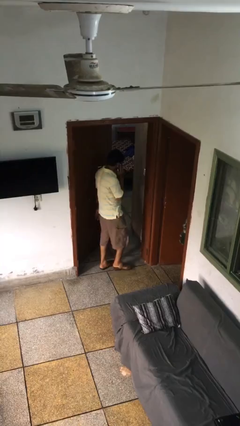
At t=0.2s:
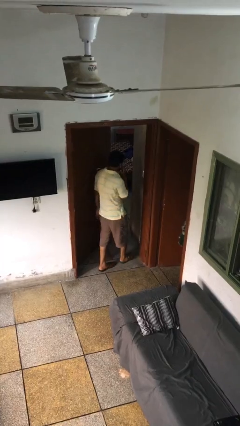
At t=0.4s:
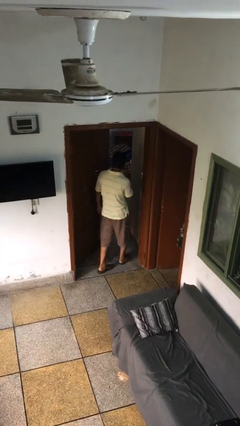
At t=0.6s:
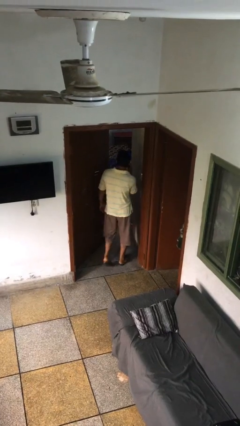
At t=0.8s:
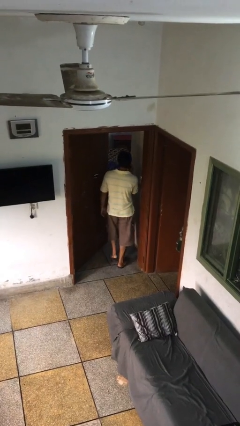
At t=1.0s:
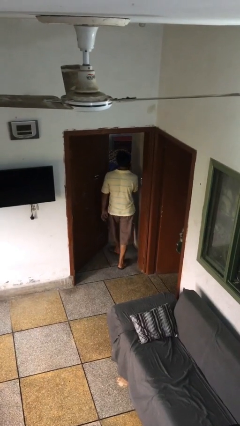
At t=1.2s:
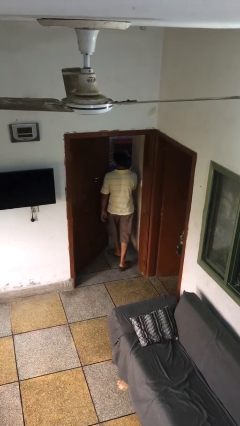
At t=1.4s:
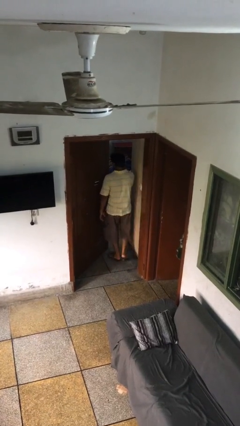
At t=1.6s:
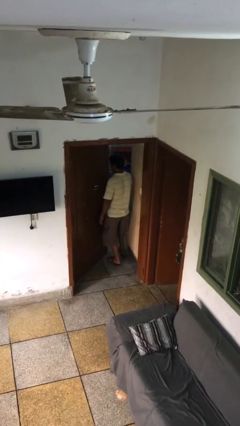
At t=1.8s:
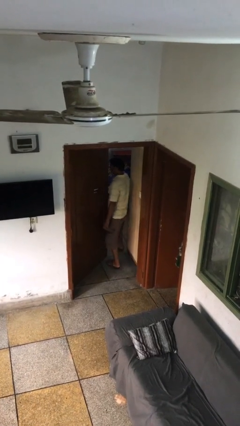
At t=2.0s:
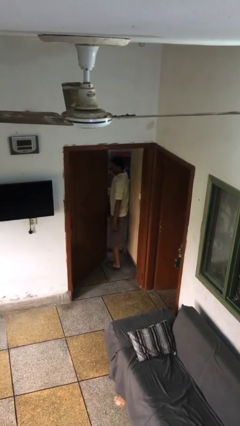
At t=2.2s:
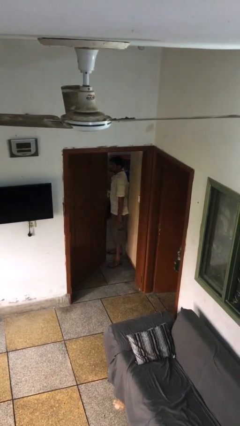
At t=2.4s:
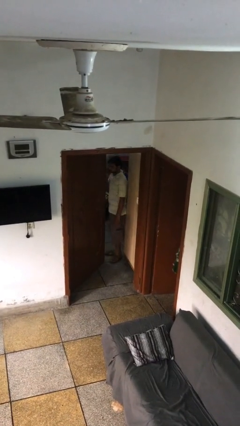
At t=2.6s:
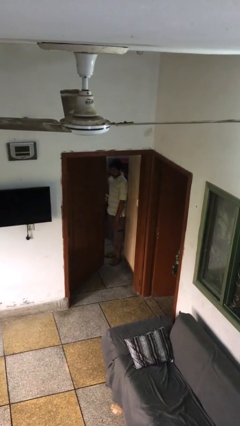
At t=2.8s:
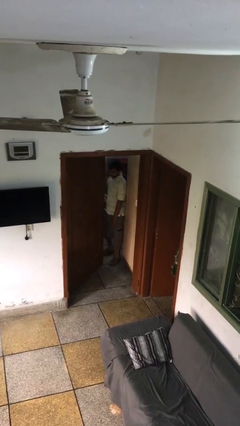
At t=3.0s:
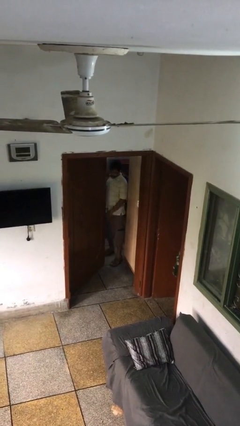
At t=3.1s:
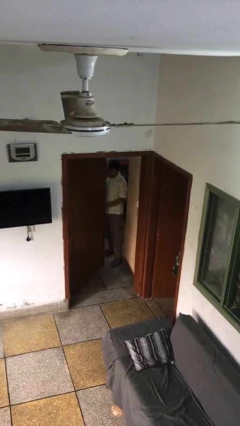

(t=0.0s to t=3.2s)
person exits scene through structure

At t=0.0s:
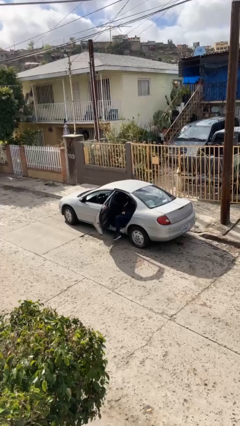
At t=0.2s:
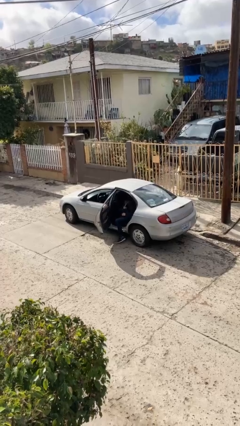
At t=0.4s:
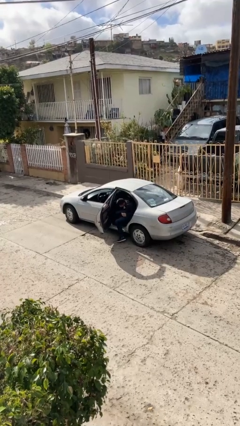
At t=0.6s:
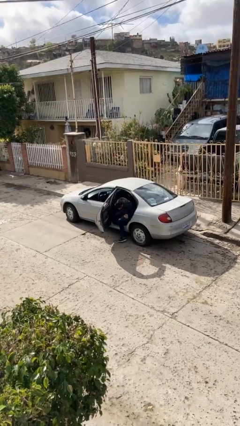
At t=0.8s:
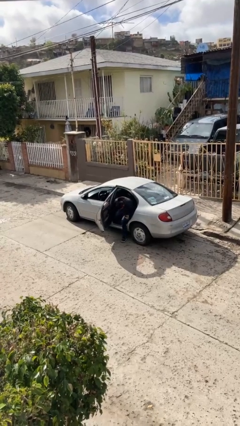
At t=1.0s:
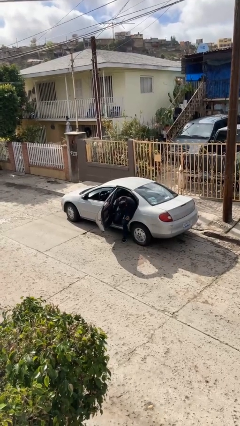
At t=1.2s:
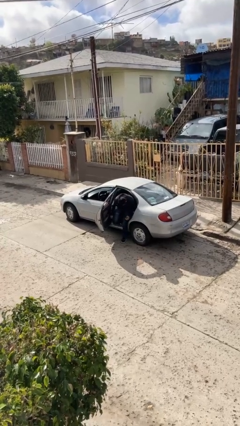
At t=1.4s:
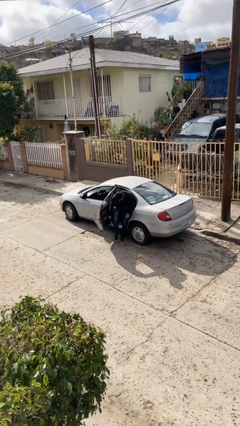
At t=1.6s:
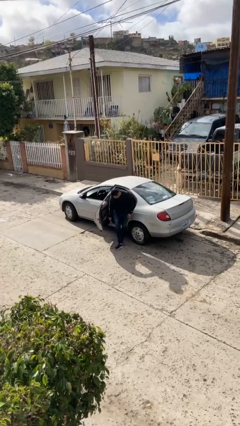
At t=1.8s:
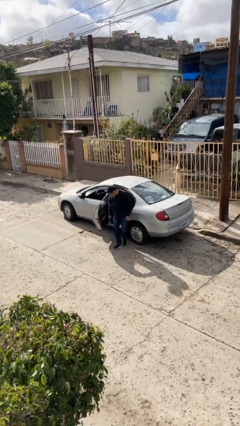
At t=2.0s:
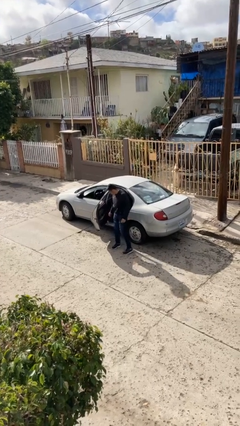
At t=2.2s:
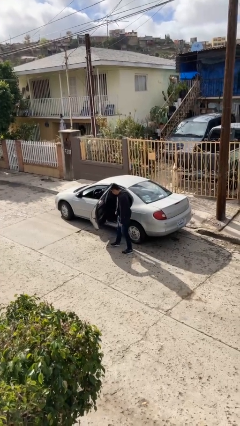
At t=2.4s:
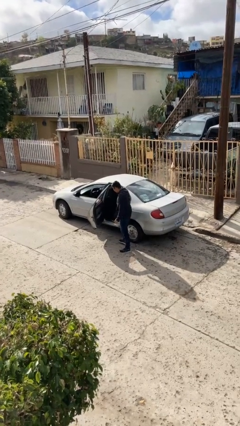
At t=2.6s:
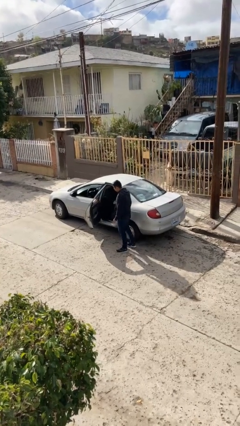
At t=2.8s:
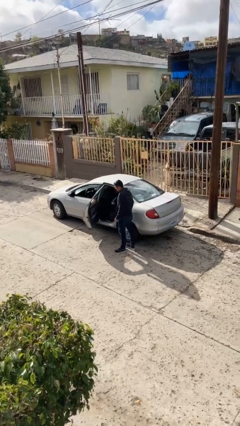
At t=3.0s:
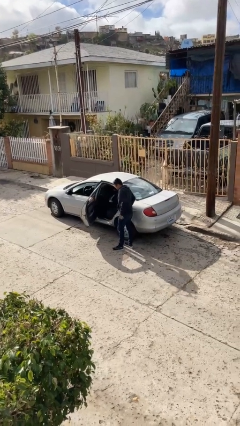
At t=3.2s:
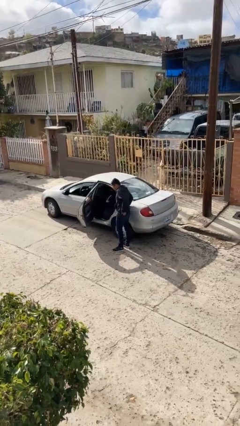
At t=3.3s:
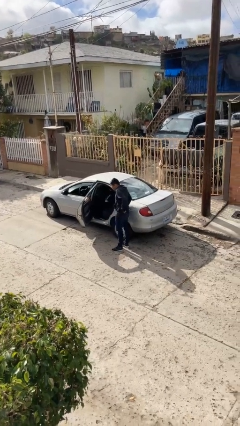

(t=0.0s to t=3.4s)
person exits car

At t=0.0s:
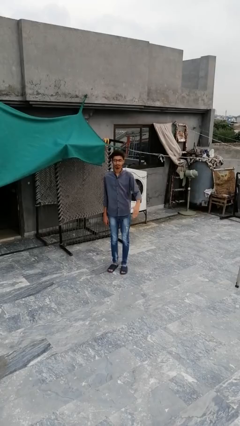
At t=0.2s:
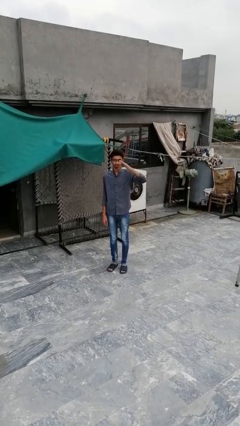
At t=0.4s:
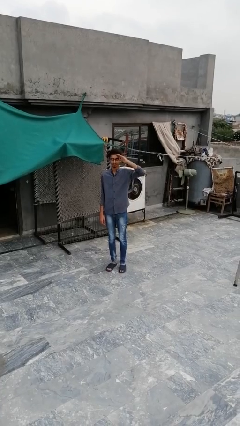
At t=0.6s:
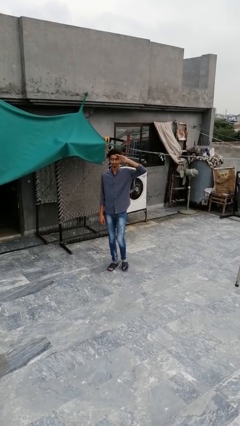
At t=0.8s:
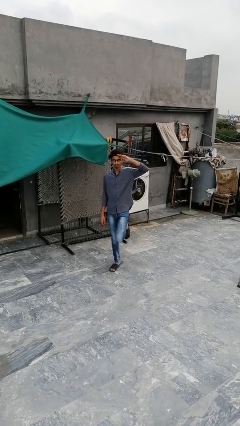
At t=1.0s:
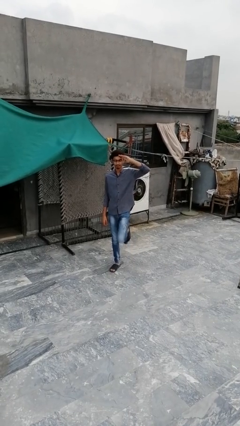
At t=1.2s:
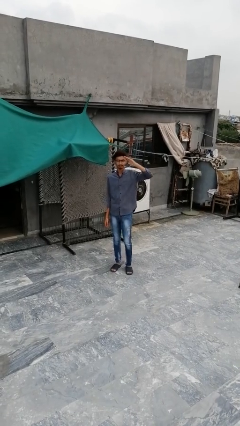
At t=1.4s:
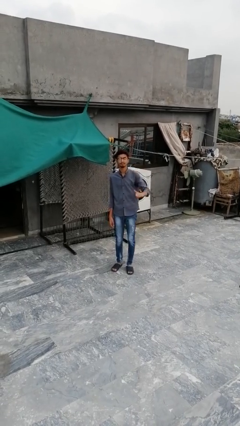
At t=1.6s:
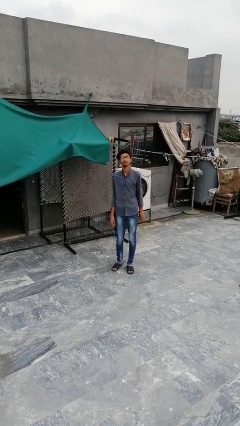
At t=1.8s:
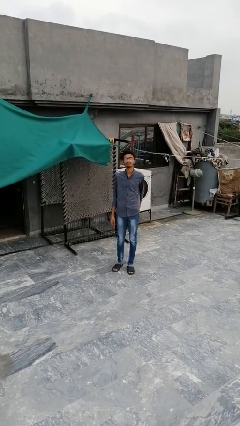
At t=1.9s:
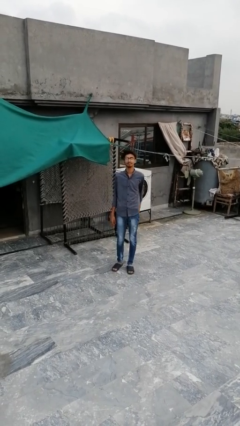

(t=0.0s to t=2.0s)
person salutes

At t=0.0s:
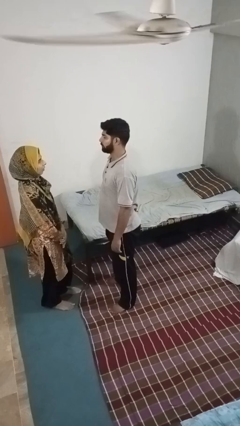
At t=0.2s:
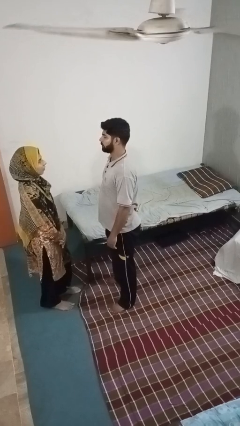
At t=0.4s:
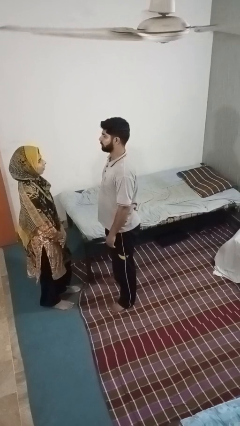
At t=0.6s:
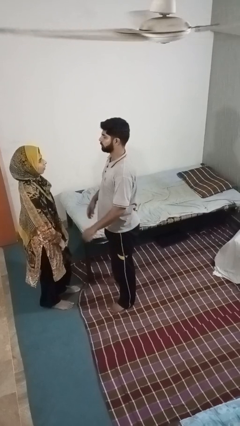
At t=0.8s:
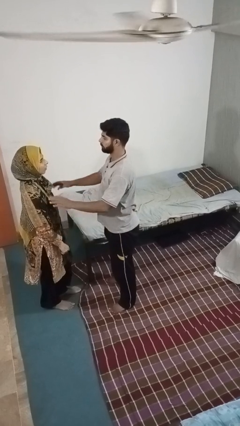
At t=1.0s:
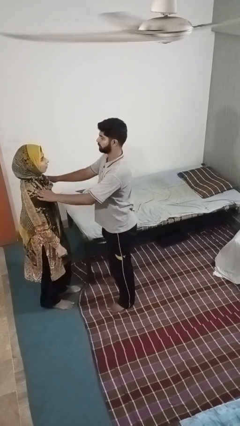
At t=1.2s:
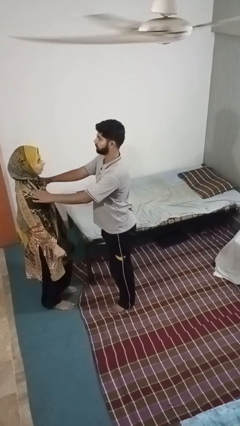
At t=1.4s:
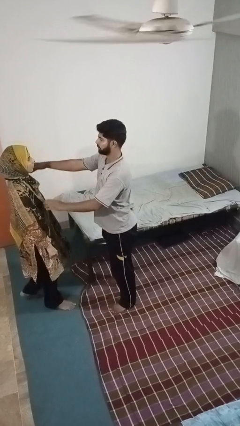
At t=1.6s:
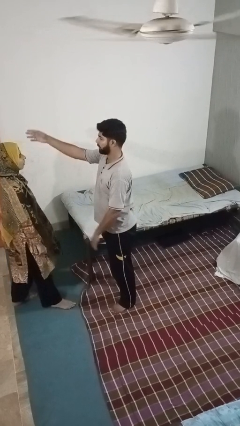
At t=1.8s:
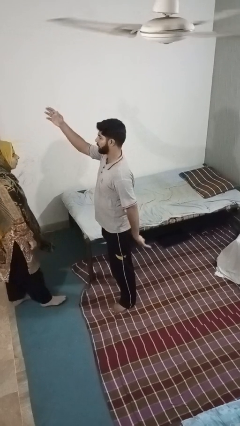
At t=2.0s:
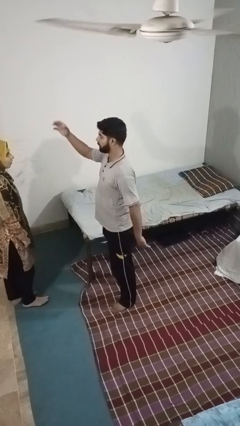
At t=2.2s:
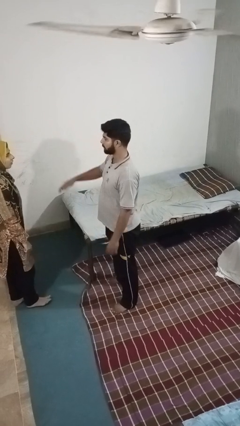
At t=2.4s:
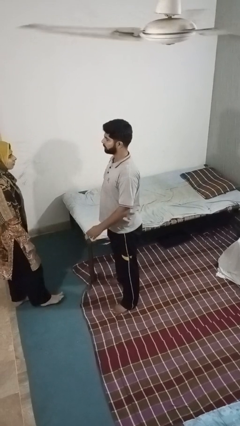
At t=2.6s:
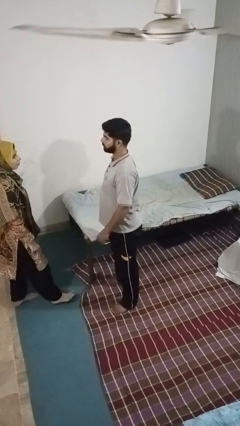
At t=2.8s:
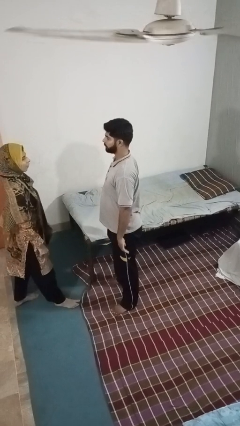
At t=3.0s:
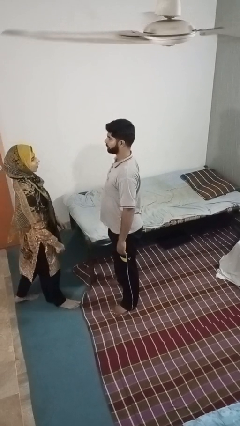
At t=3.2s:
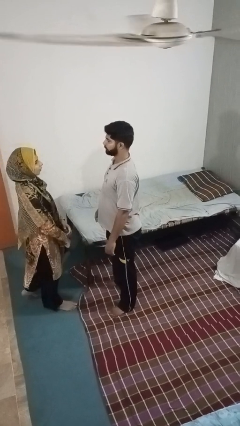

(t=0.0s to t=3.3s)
person shoves person

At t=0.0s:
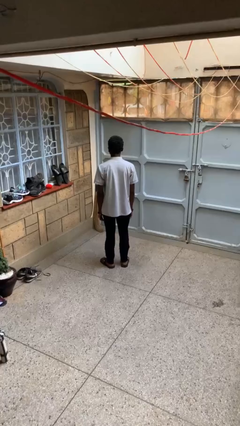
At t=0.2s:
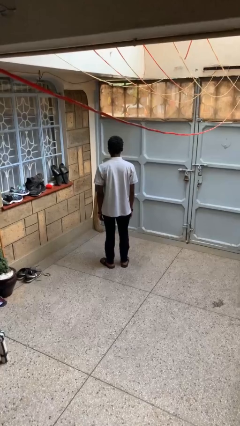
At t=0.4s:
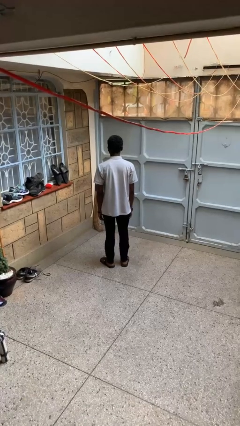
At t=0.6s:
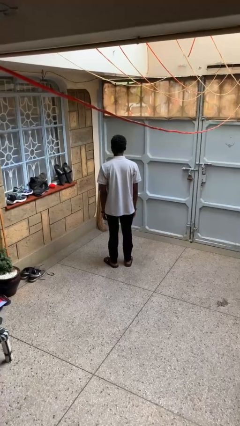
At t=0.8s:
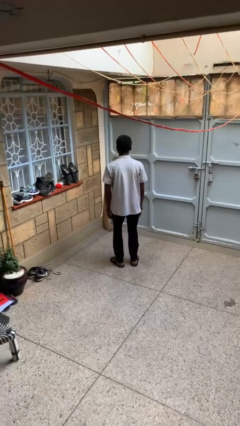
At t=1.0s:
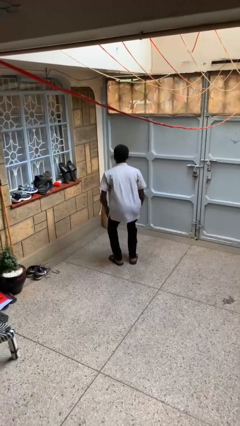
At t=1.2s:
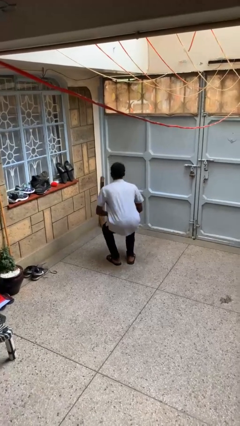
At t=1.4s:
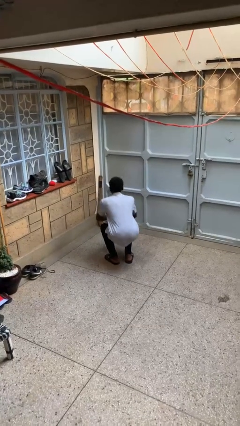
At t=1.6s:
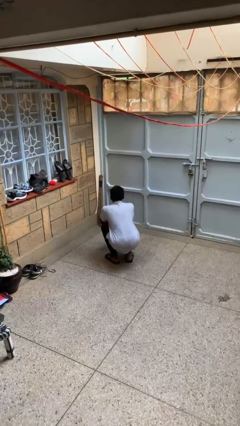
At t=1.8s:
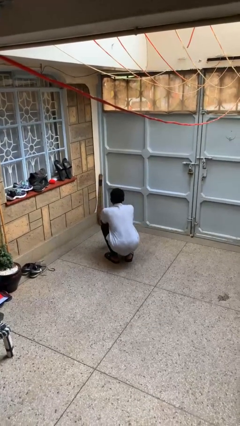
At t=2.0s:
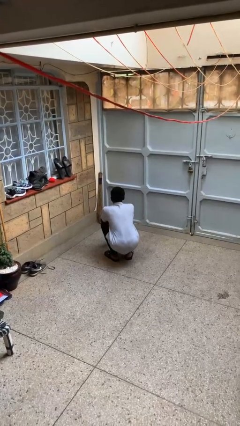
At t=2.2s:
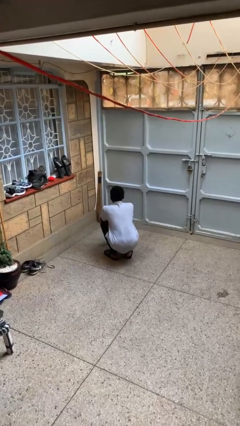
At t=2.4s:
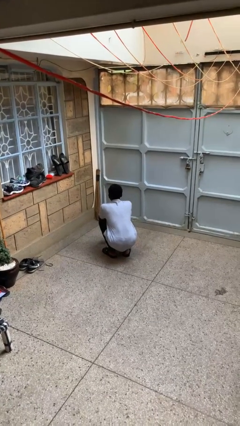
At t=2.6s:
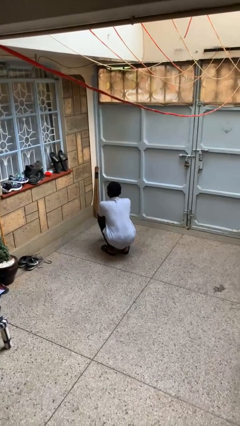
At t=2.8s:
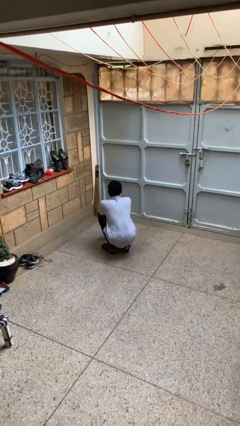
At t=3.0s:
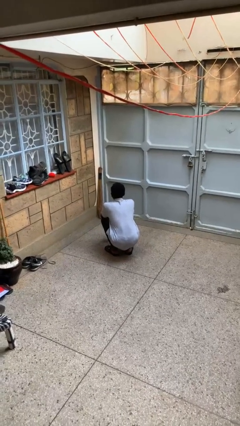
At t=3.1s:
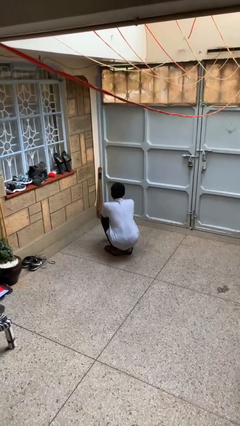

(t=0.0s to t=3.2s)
person squats

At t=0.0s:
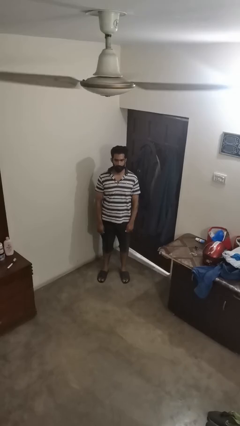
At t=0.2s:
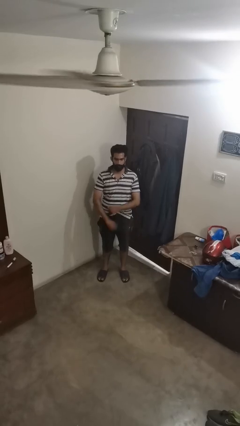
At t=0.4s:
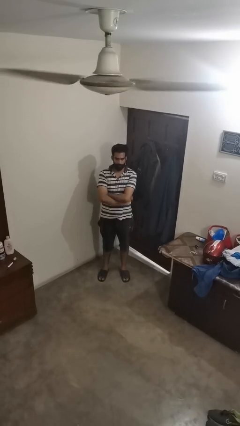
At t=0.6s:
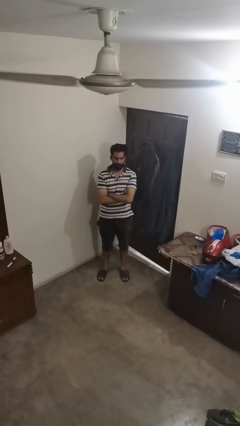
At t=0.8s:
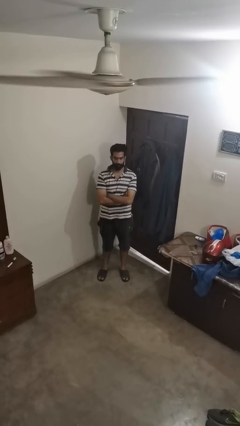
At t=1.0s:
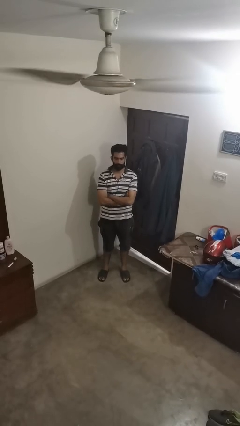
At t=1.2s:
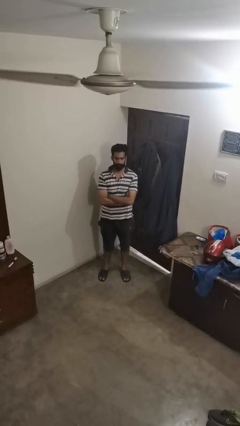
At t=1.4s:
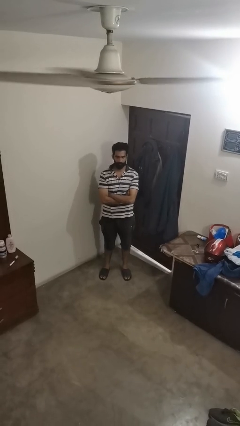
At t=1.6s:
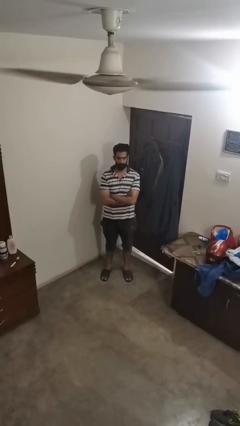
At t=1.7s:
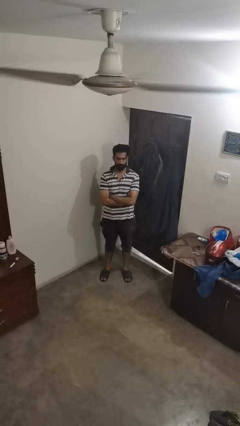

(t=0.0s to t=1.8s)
person crosses arms

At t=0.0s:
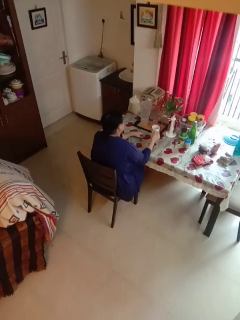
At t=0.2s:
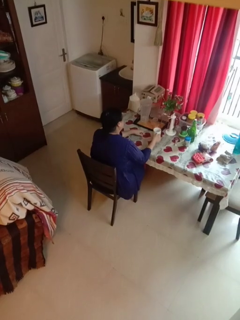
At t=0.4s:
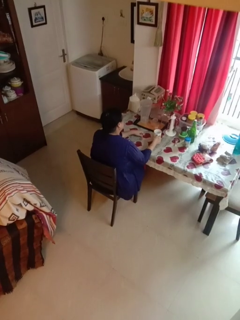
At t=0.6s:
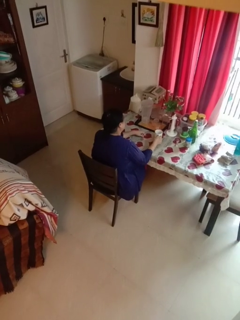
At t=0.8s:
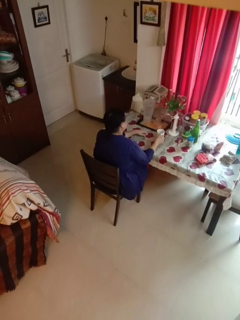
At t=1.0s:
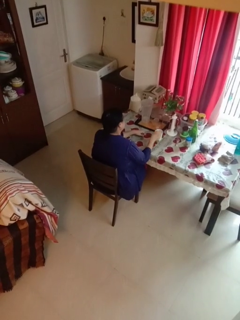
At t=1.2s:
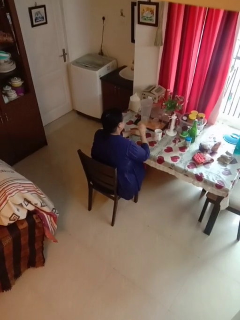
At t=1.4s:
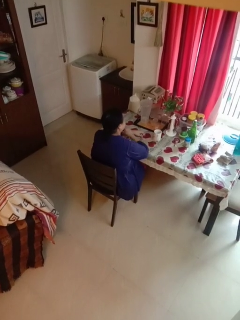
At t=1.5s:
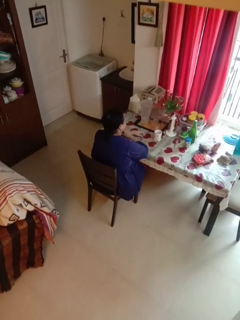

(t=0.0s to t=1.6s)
person puts down object on table
